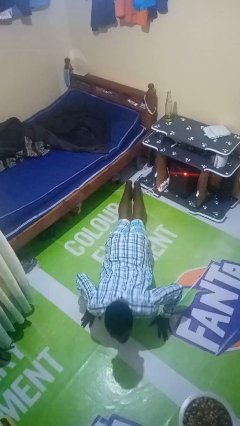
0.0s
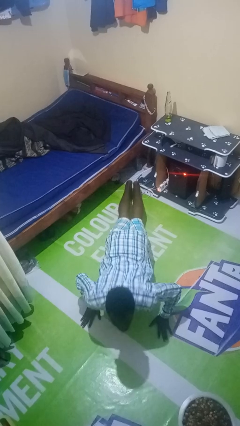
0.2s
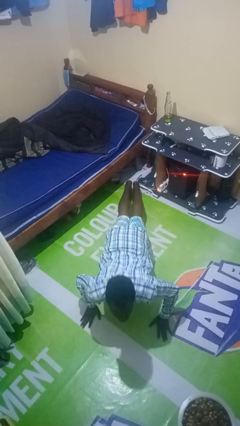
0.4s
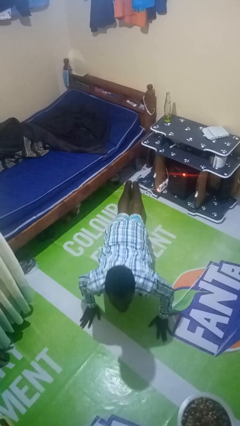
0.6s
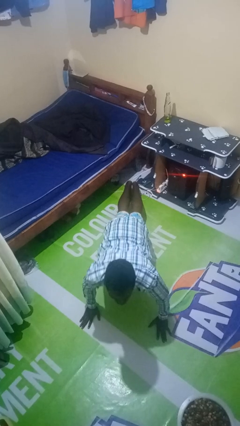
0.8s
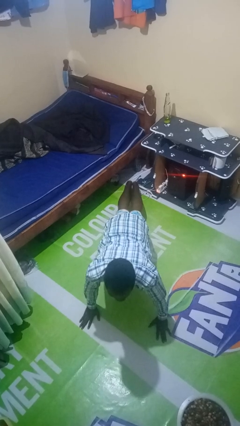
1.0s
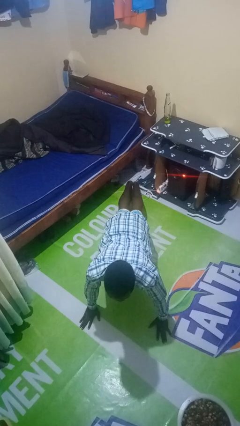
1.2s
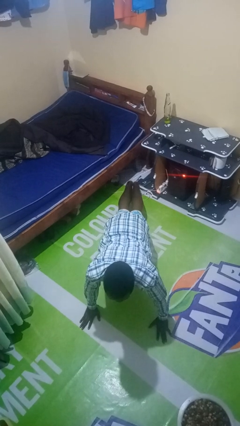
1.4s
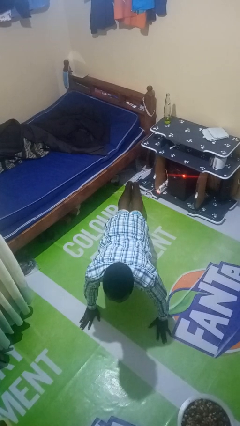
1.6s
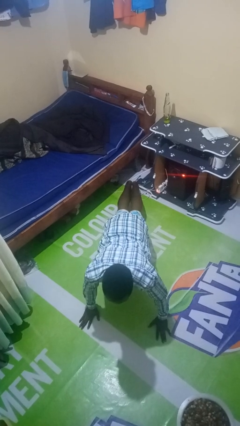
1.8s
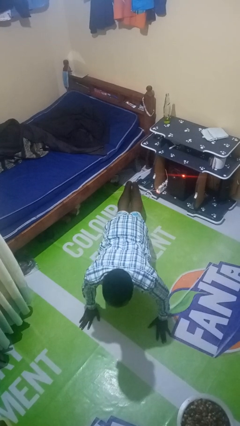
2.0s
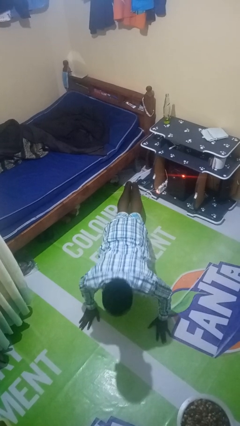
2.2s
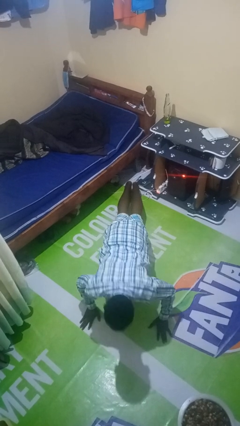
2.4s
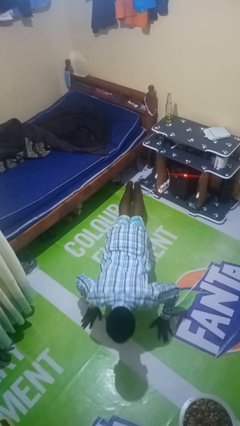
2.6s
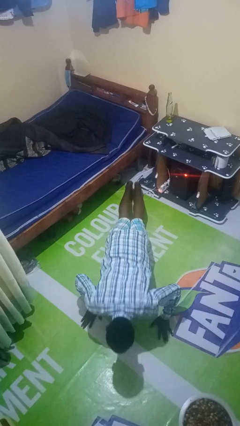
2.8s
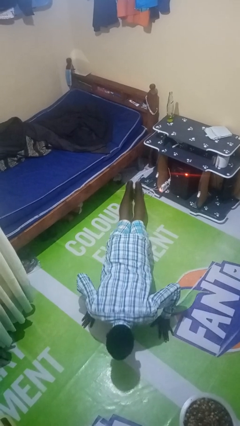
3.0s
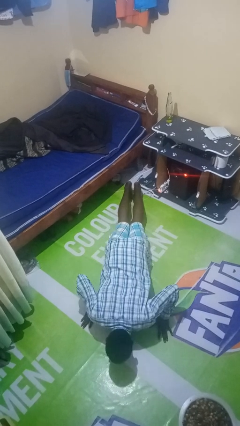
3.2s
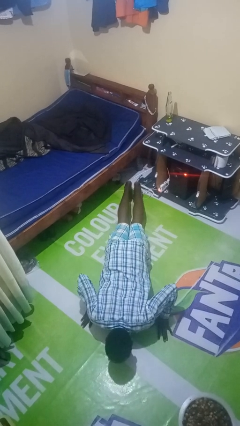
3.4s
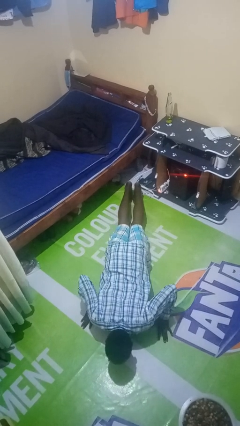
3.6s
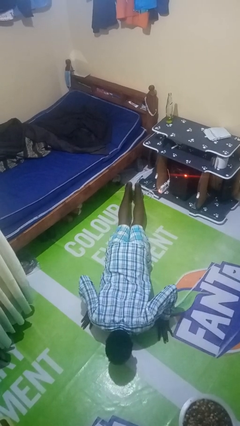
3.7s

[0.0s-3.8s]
person exercises with pushup

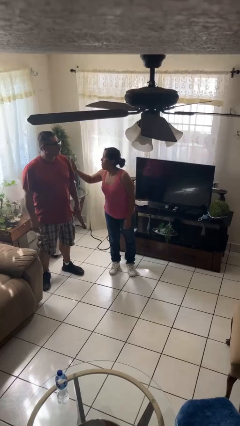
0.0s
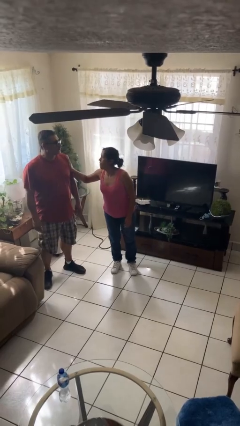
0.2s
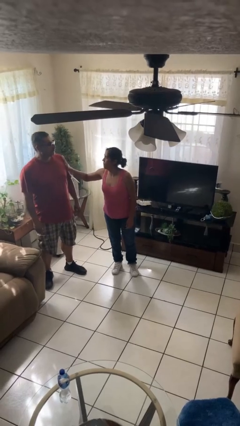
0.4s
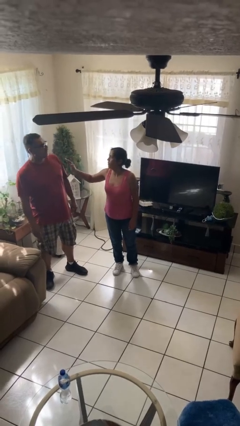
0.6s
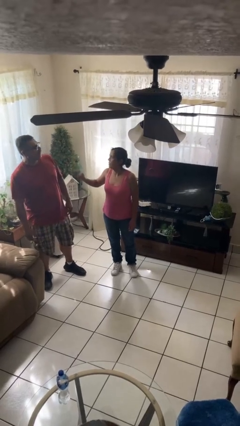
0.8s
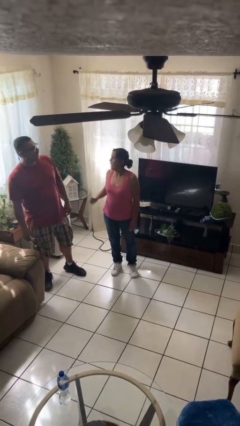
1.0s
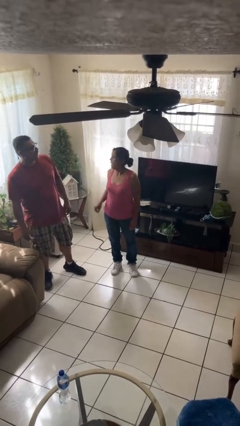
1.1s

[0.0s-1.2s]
person shoves person

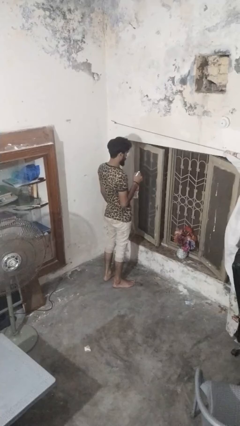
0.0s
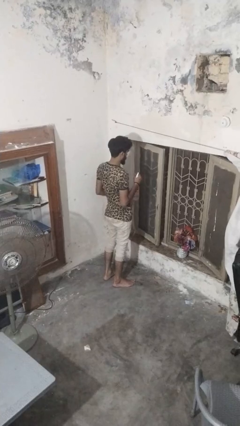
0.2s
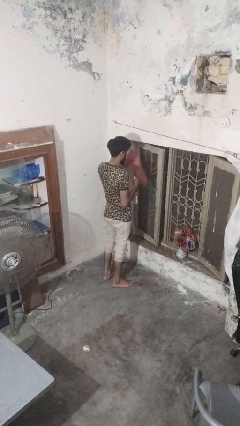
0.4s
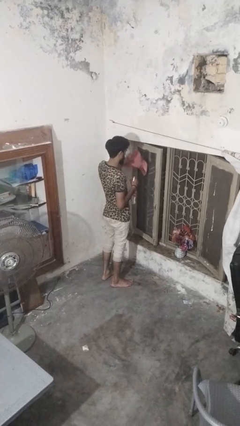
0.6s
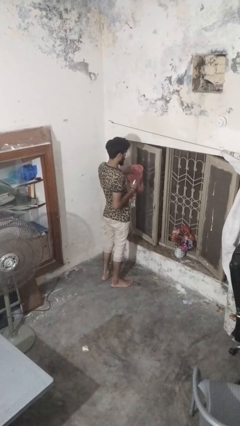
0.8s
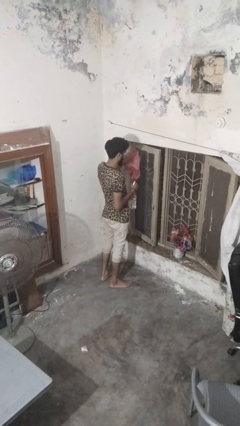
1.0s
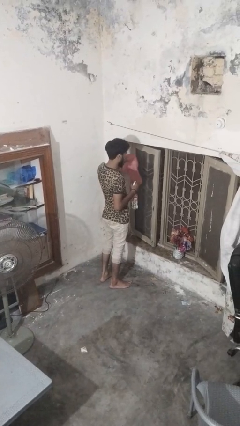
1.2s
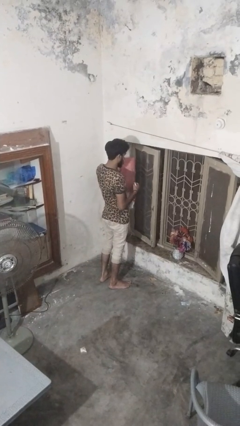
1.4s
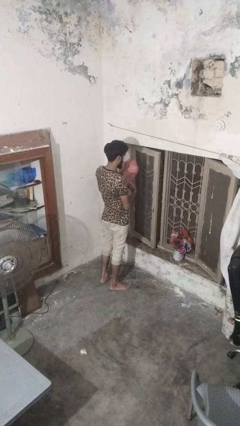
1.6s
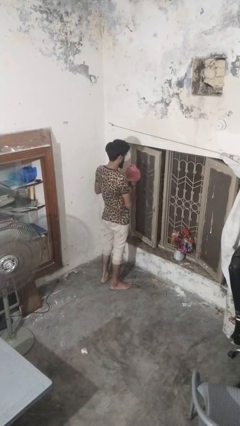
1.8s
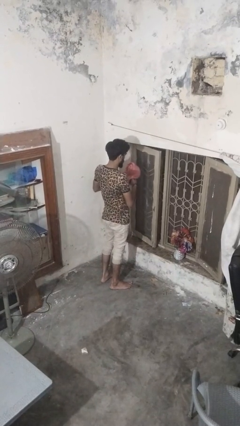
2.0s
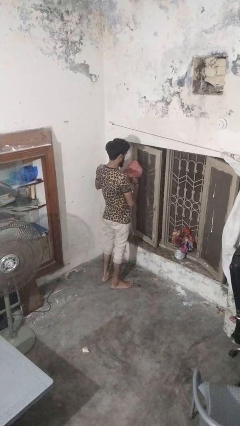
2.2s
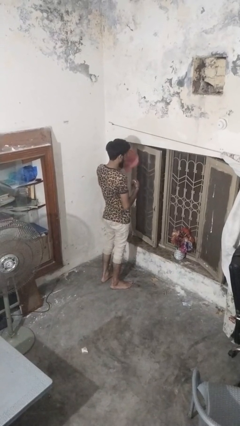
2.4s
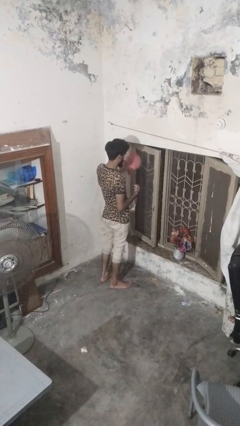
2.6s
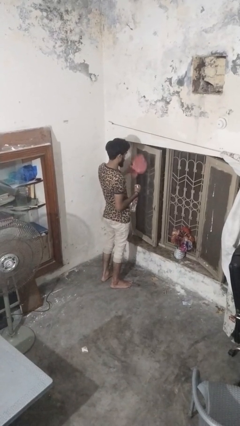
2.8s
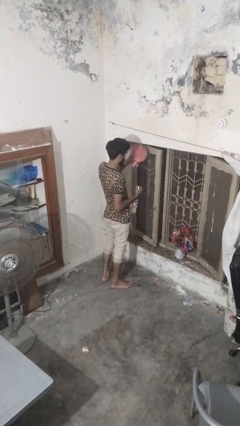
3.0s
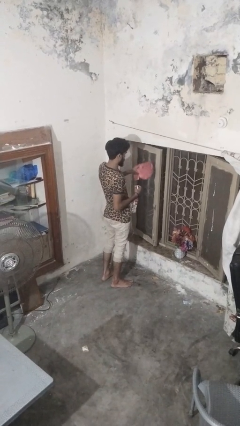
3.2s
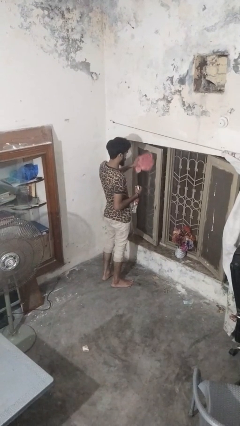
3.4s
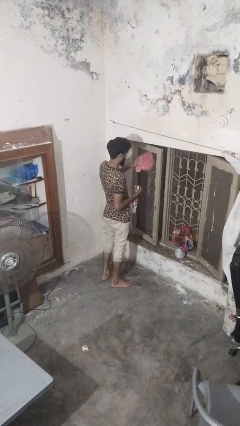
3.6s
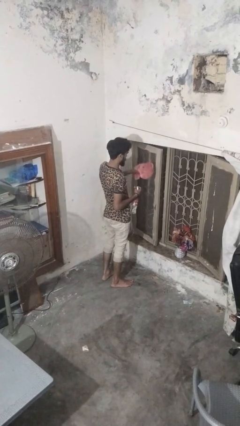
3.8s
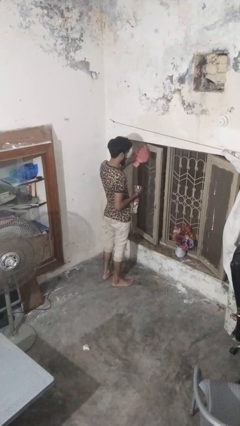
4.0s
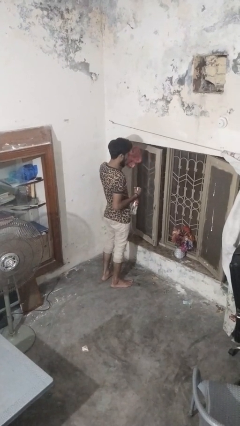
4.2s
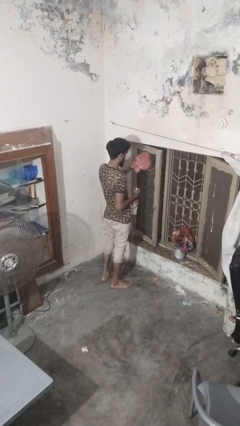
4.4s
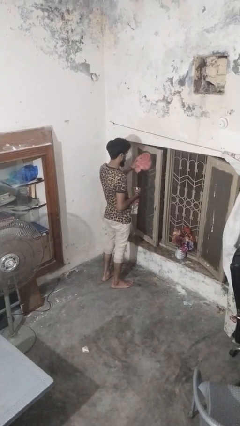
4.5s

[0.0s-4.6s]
person washes window

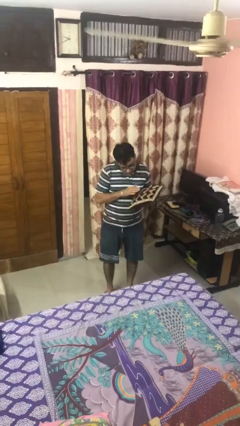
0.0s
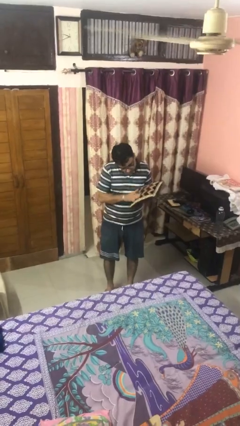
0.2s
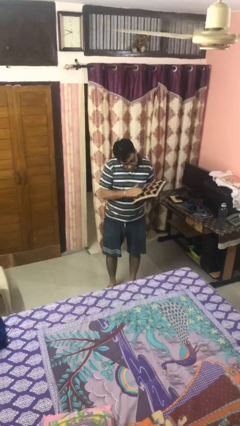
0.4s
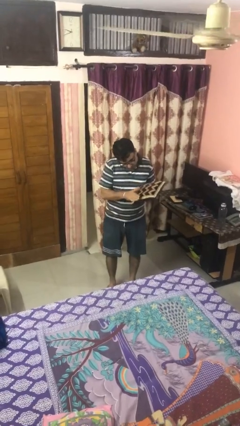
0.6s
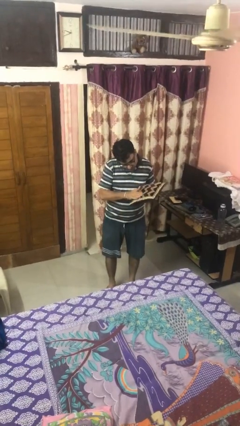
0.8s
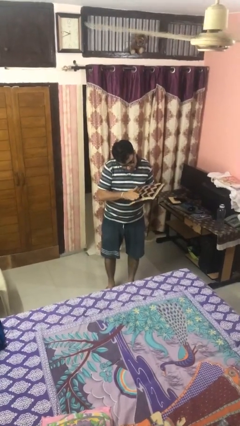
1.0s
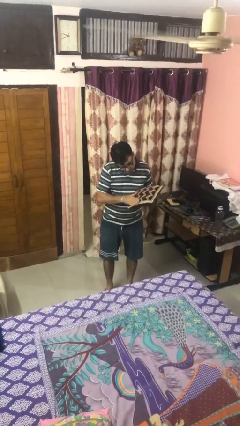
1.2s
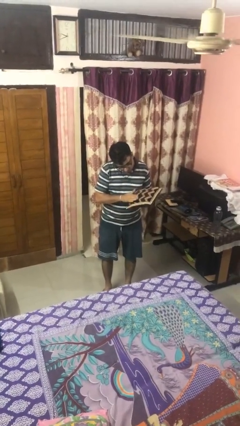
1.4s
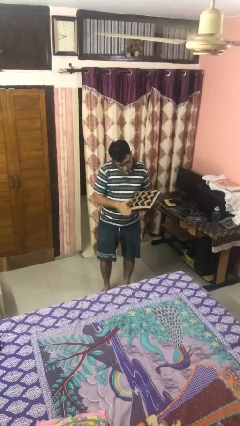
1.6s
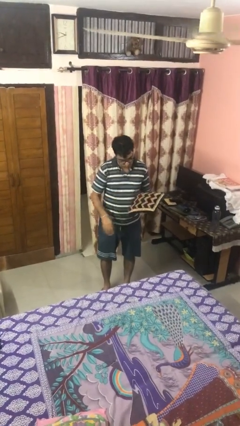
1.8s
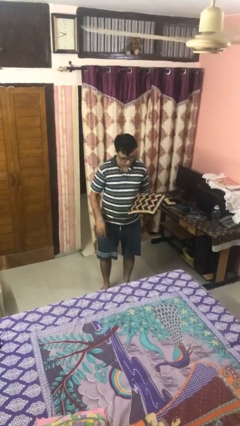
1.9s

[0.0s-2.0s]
person waves hand over object

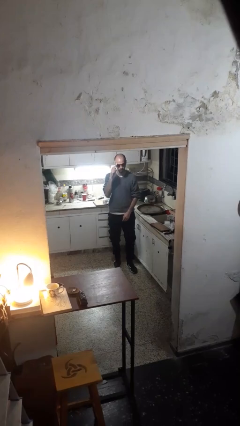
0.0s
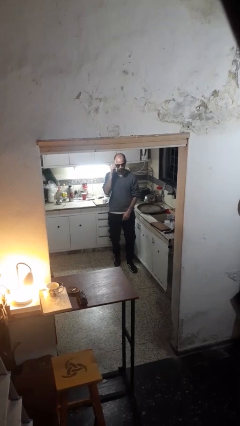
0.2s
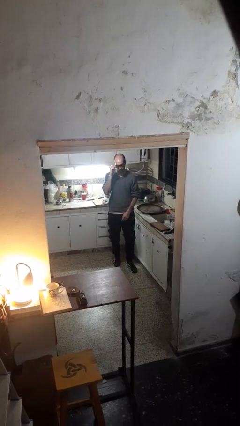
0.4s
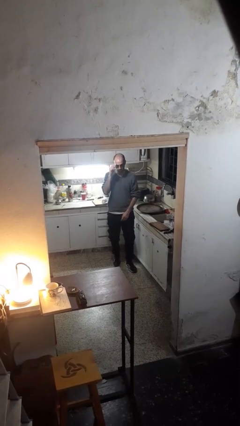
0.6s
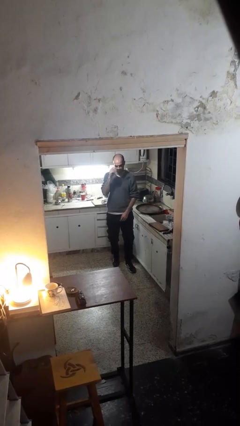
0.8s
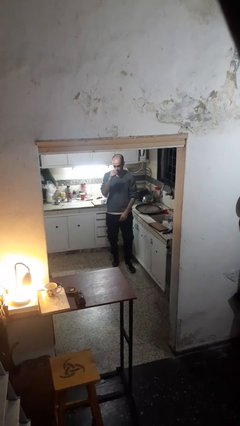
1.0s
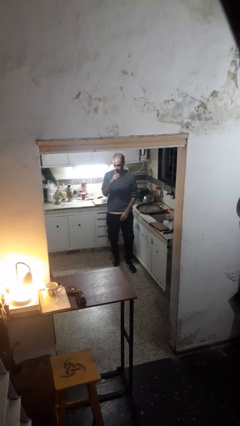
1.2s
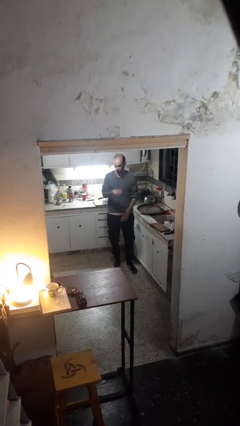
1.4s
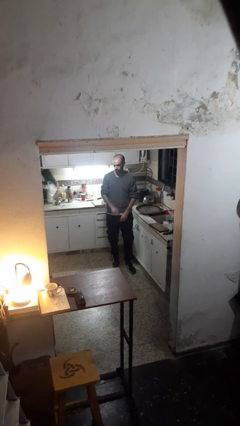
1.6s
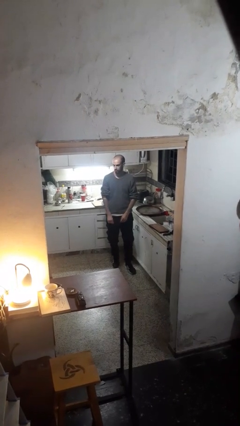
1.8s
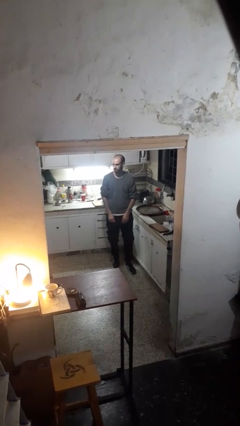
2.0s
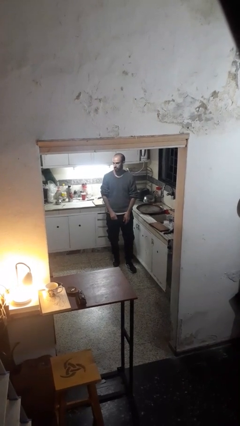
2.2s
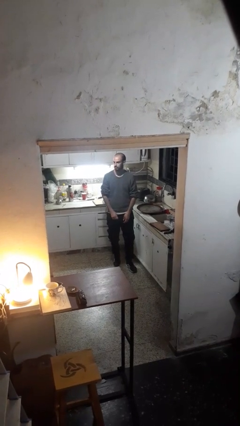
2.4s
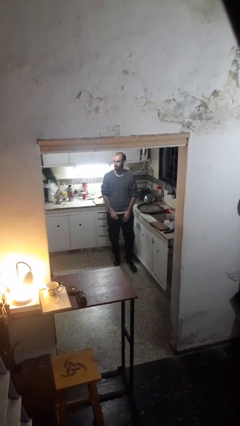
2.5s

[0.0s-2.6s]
person takes off sunglasses

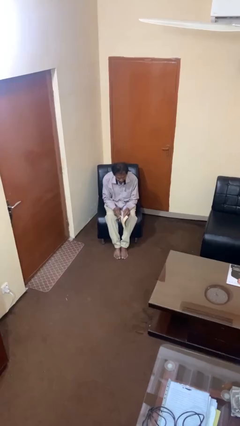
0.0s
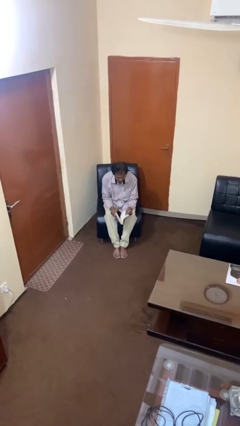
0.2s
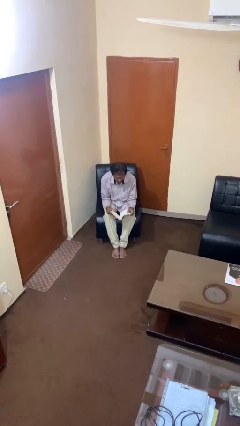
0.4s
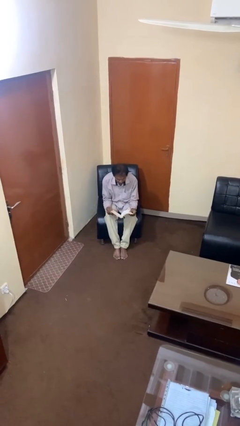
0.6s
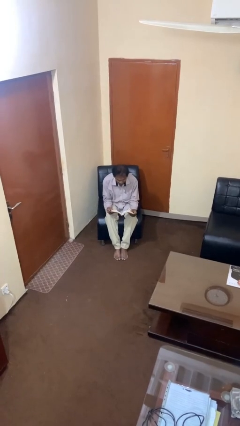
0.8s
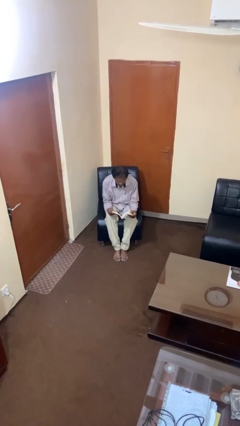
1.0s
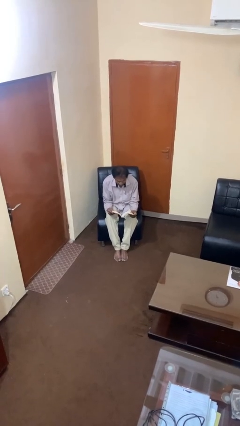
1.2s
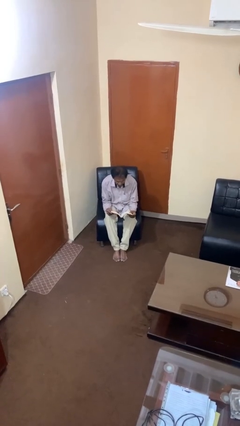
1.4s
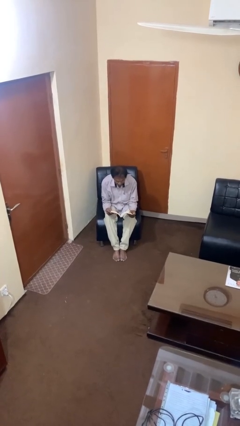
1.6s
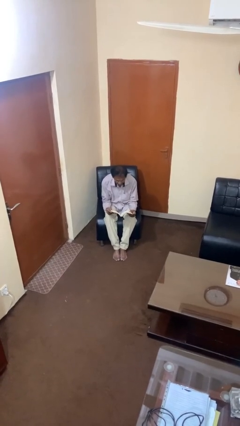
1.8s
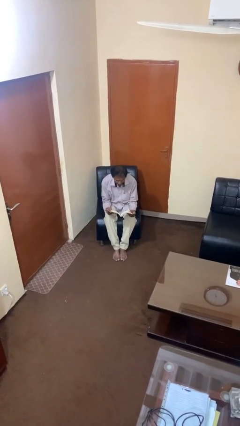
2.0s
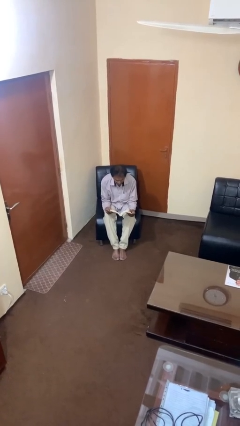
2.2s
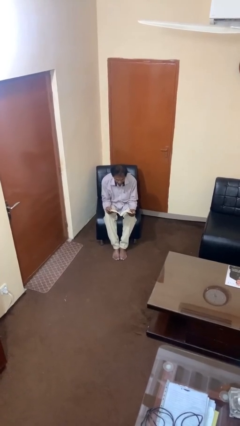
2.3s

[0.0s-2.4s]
person reads book

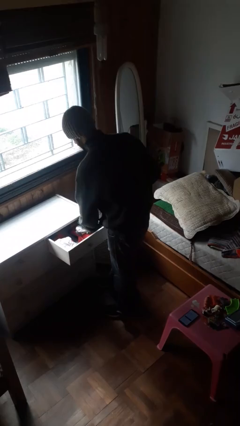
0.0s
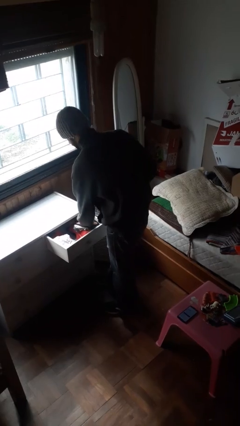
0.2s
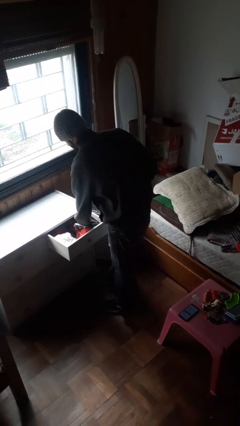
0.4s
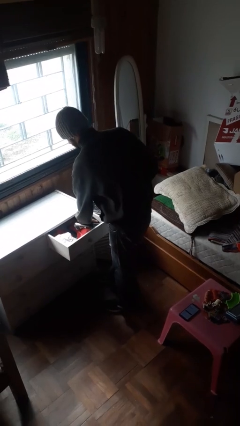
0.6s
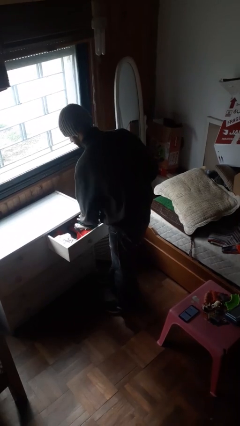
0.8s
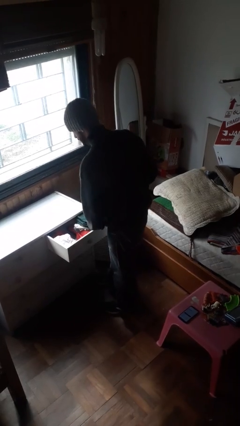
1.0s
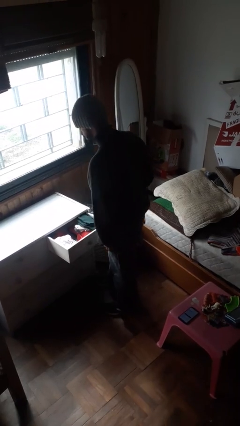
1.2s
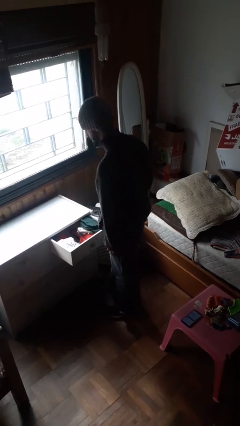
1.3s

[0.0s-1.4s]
person puts clothes into dresser
